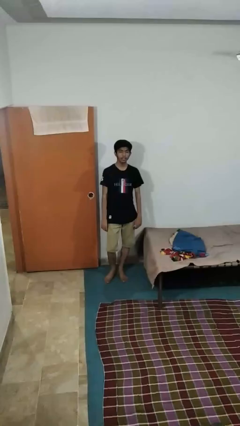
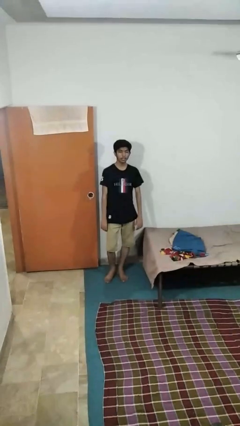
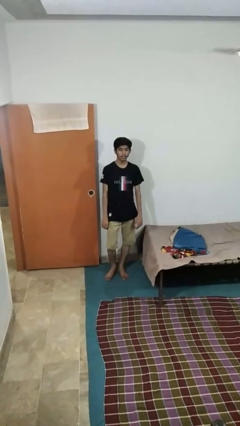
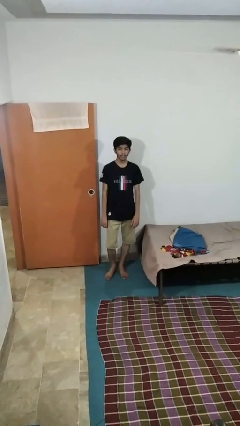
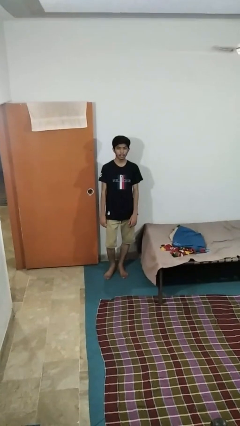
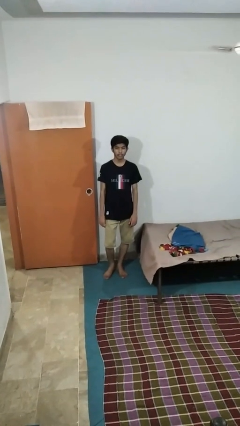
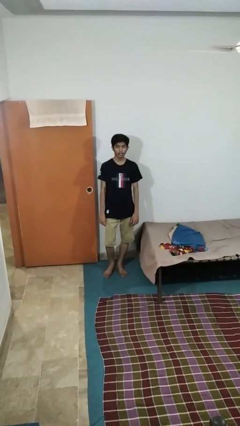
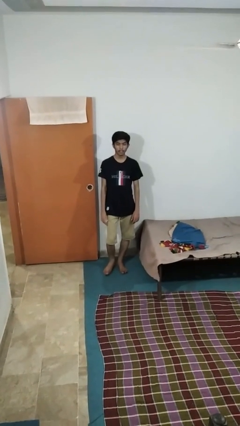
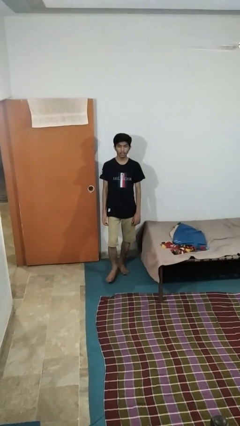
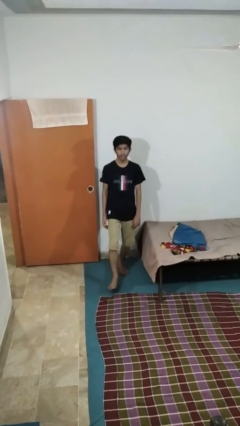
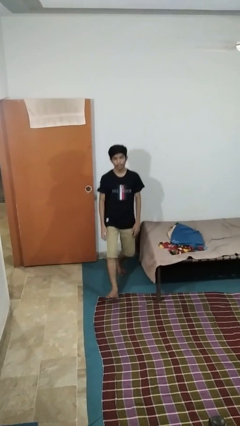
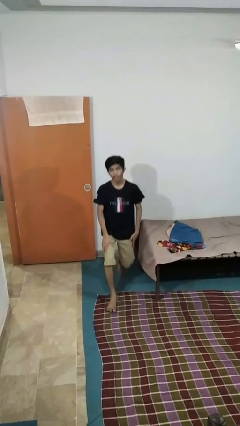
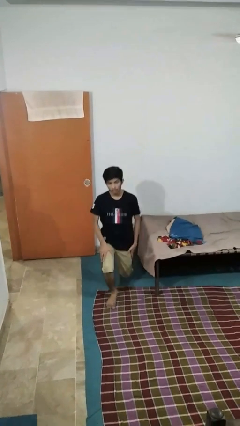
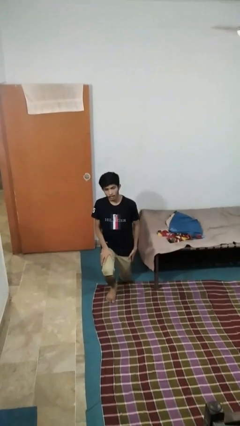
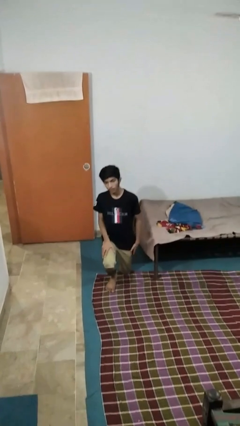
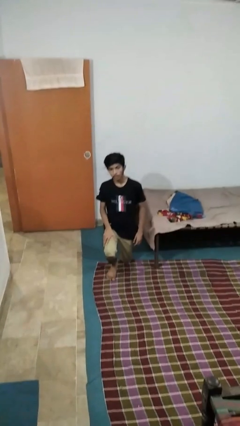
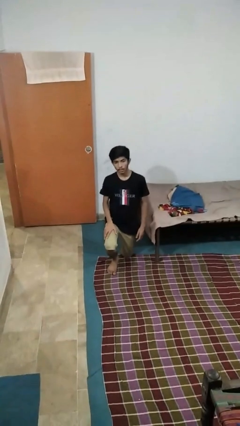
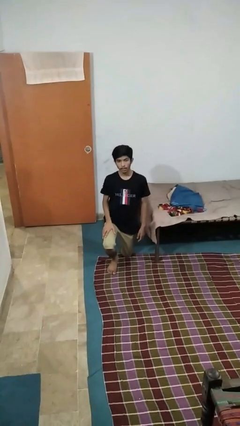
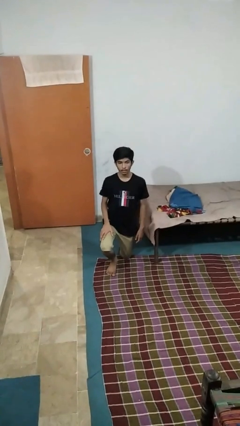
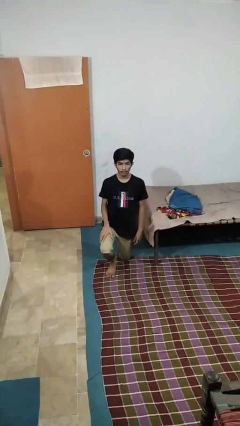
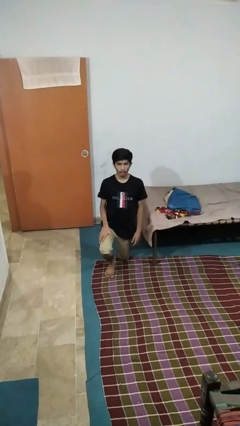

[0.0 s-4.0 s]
person kneels

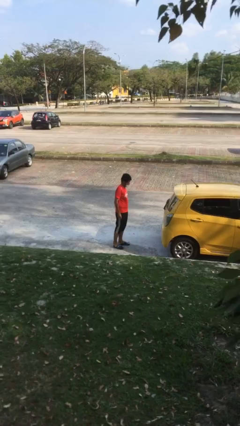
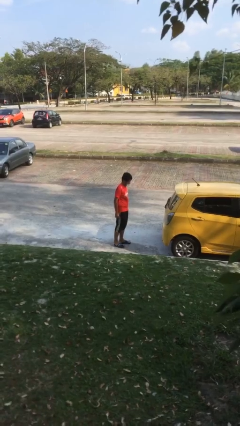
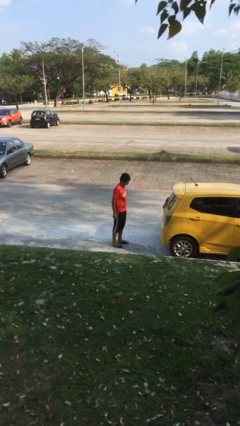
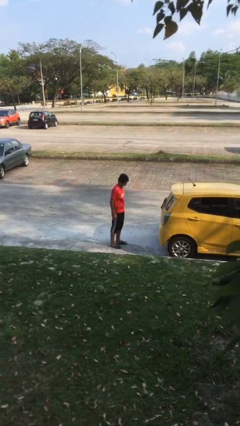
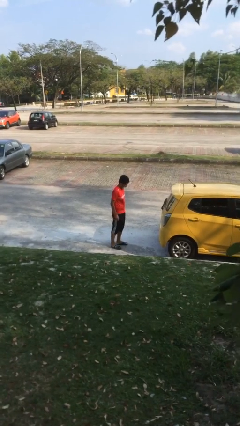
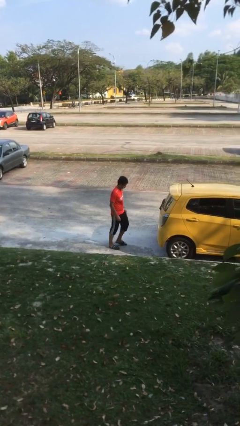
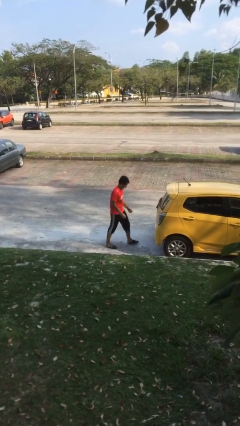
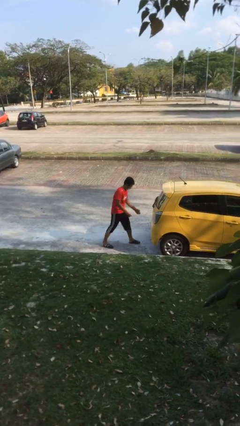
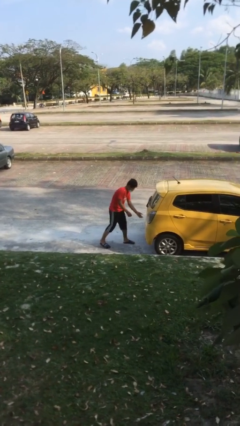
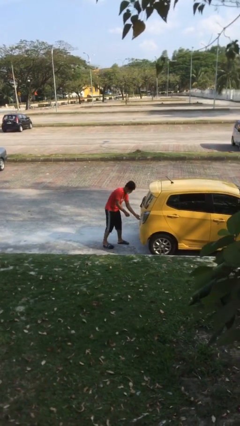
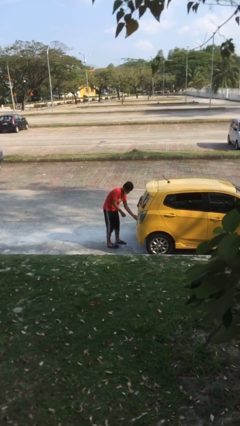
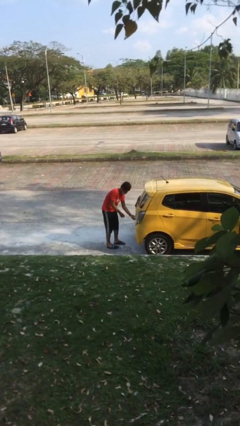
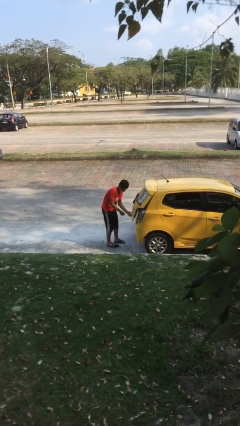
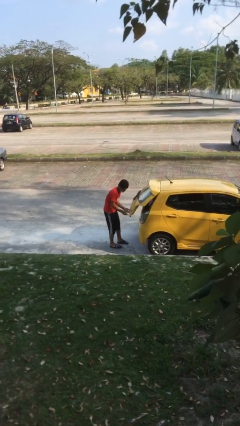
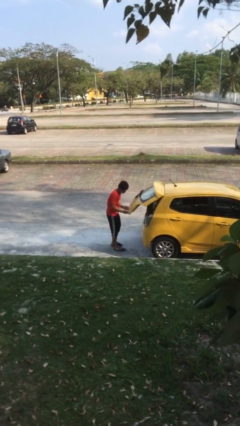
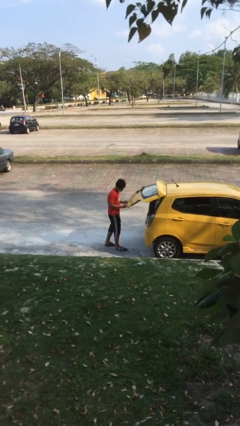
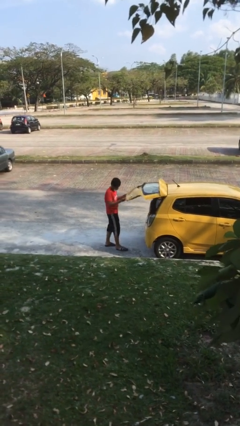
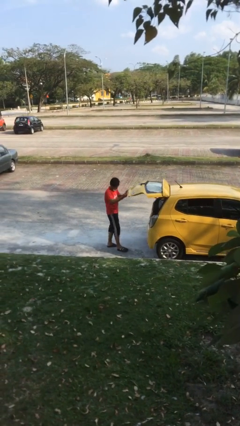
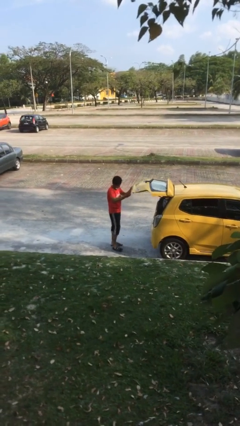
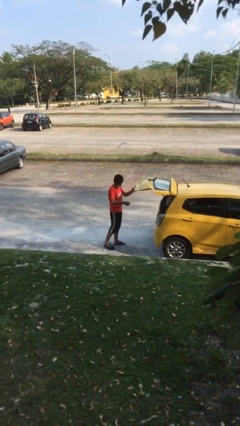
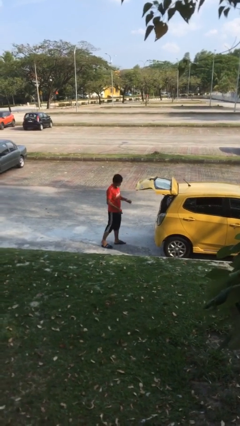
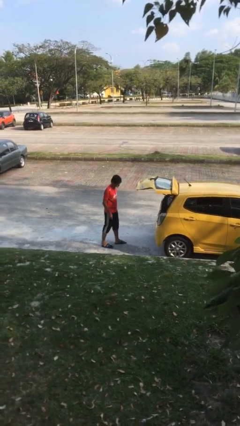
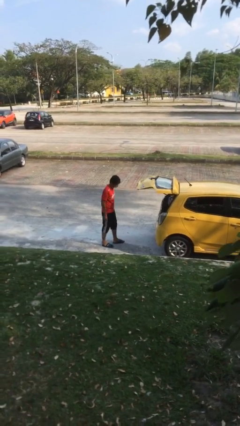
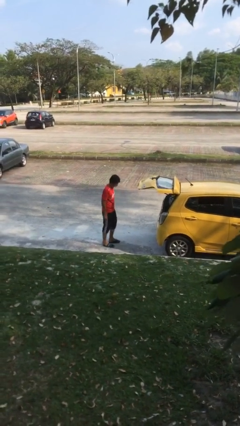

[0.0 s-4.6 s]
person opens car trunk

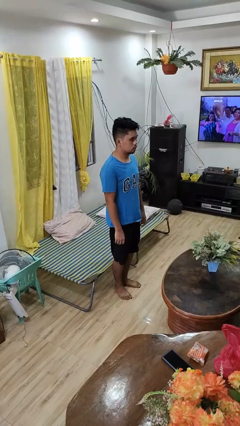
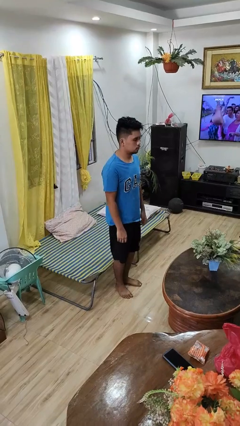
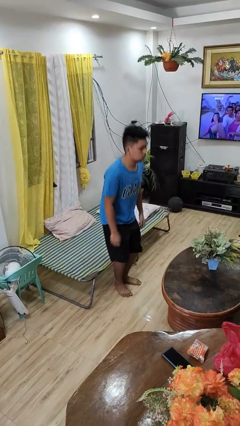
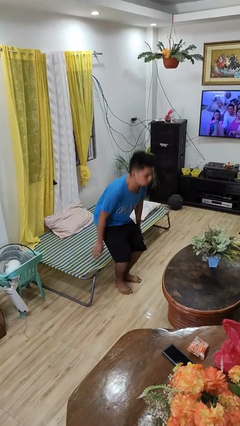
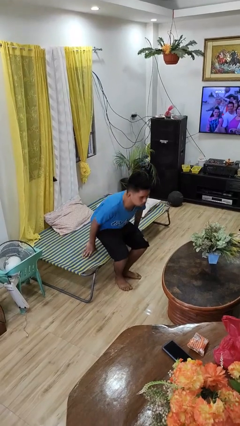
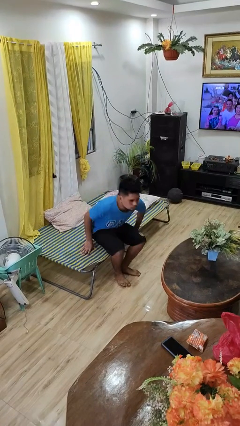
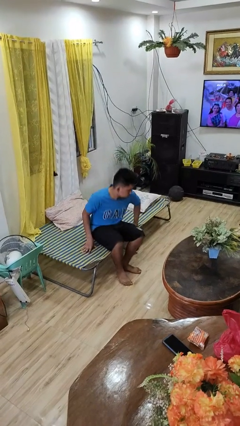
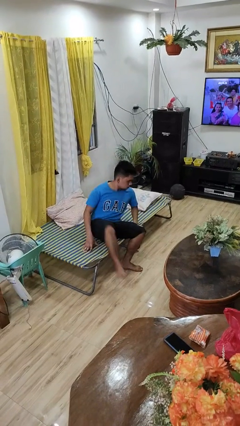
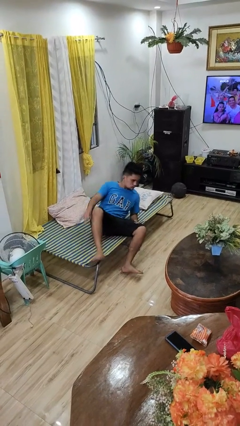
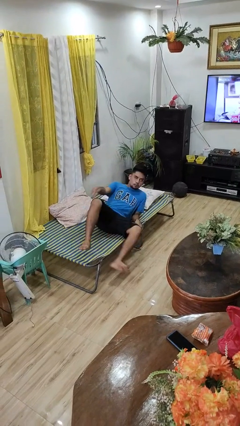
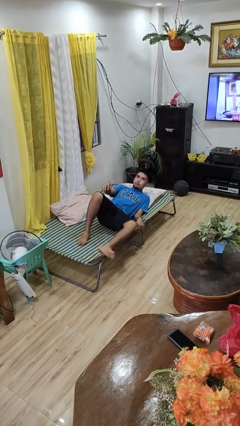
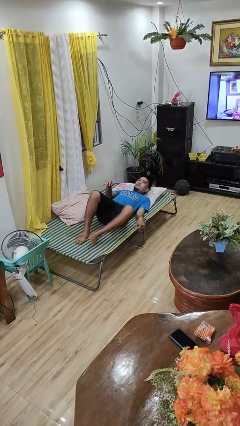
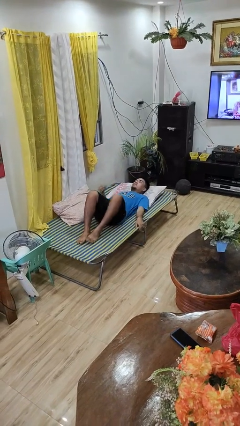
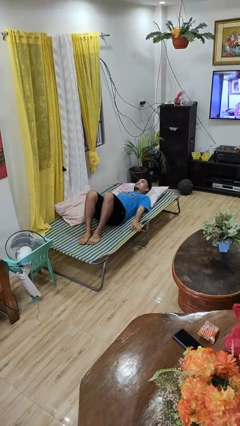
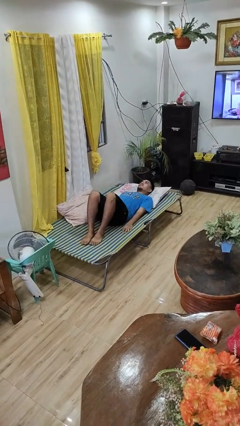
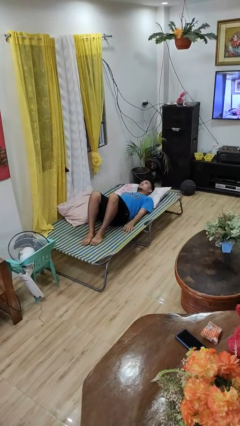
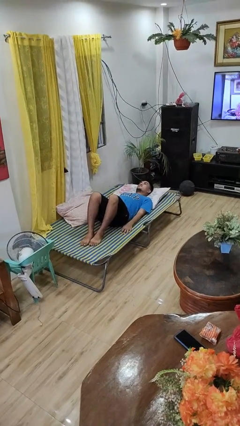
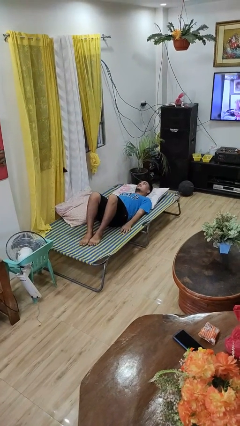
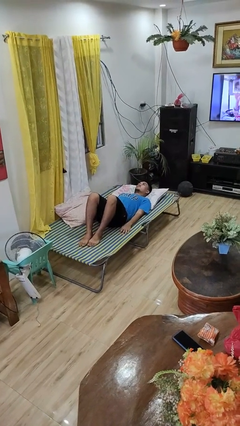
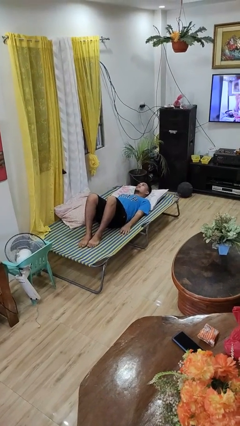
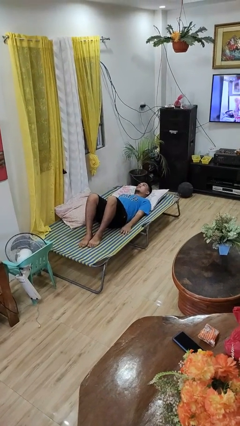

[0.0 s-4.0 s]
person lies down on bed

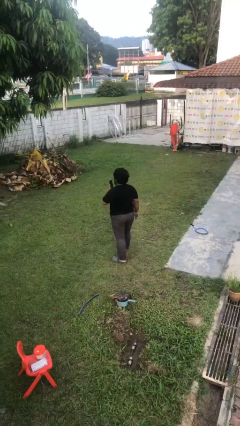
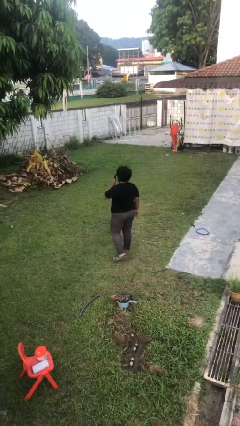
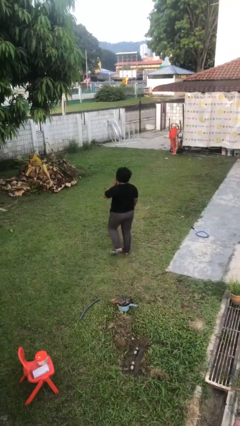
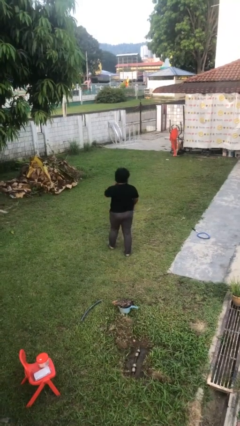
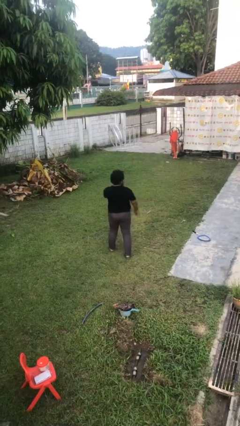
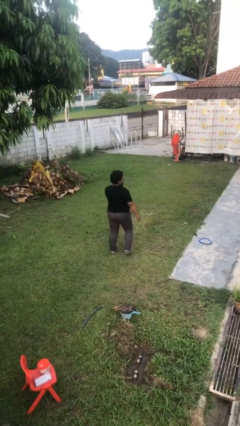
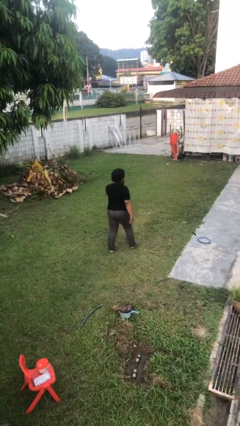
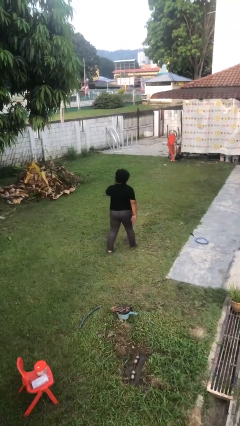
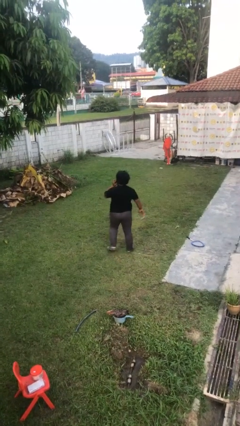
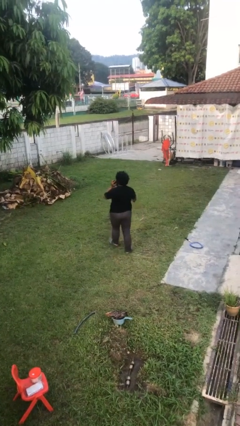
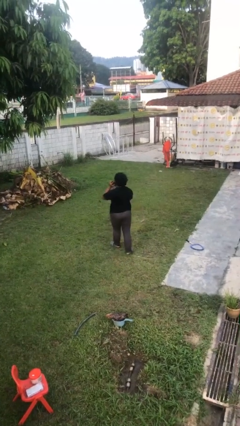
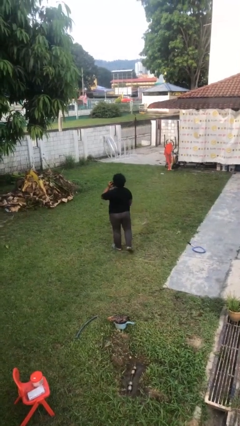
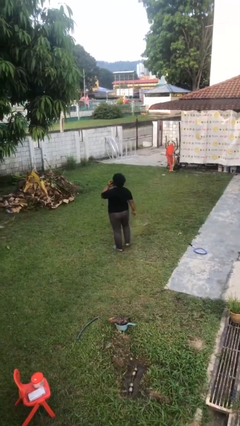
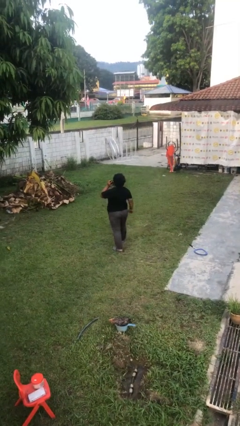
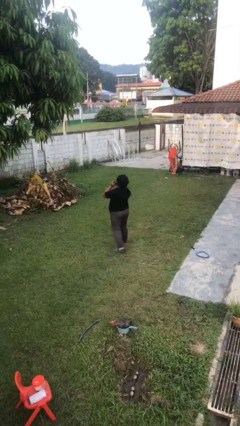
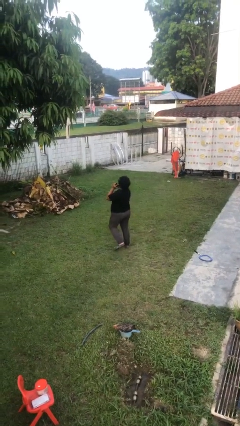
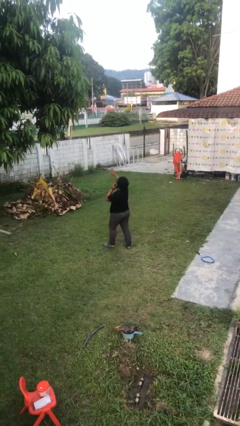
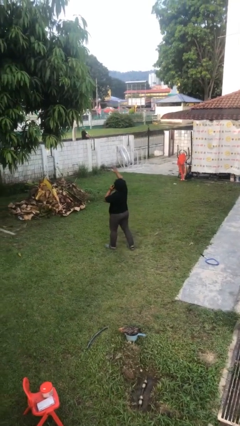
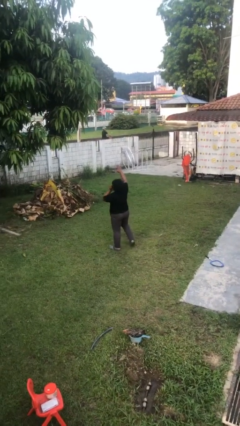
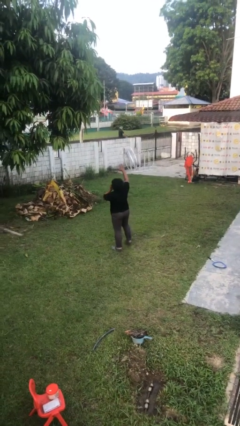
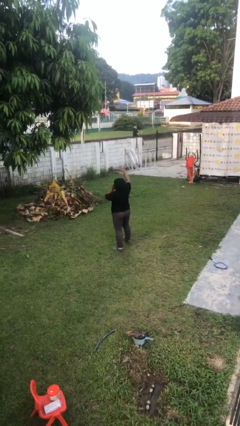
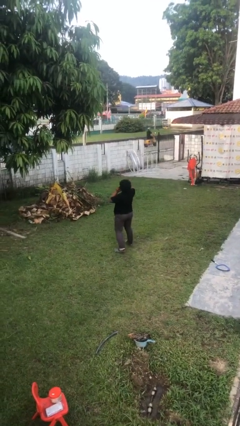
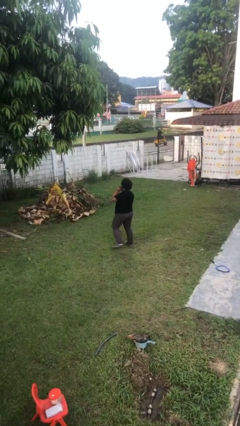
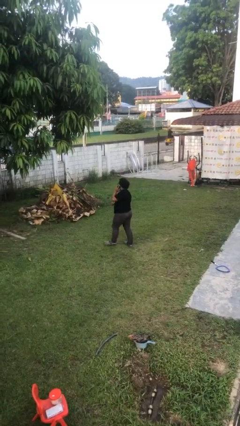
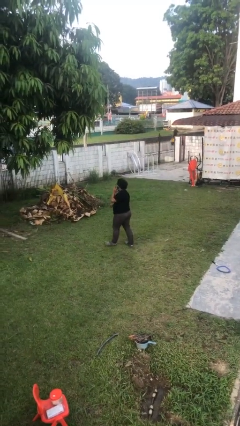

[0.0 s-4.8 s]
person talks on phone

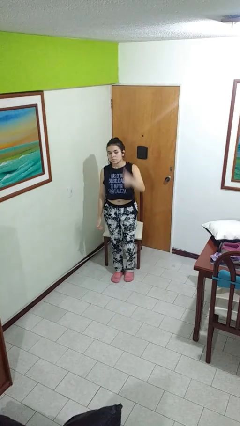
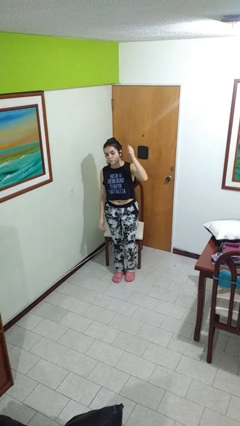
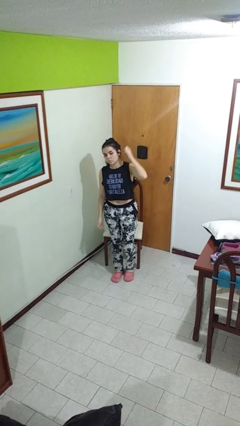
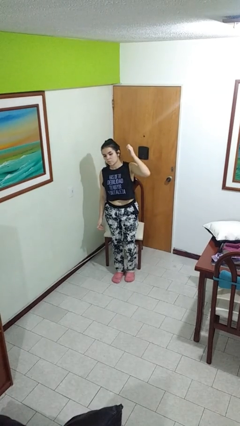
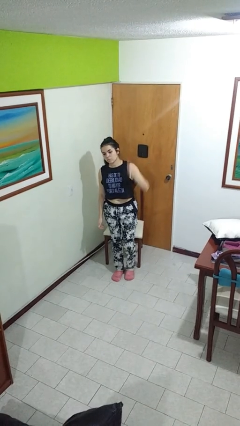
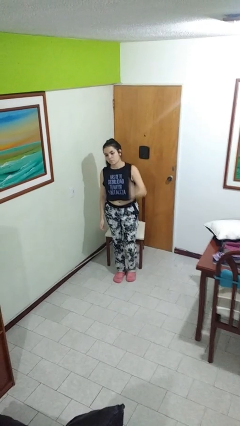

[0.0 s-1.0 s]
person gestures behind me
